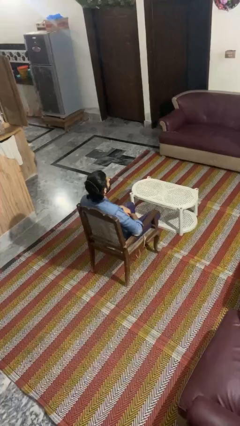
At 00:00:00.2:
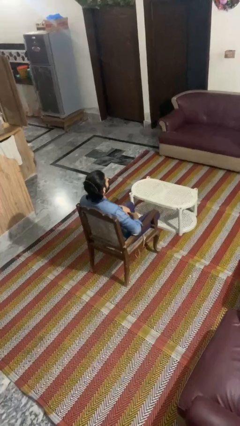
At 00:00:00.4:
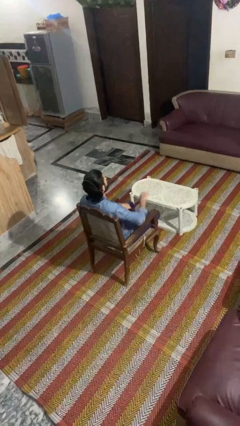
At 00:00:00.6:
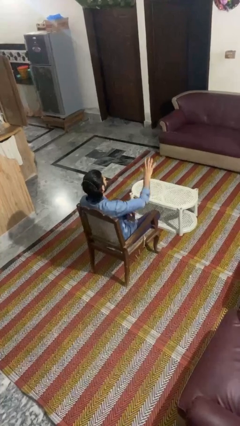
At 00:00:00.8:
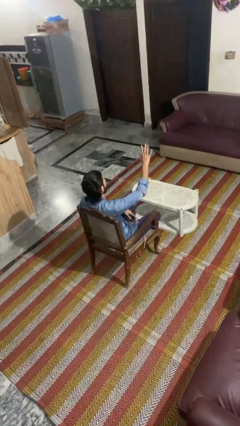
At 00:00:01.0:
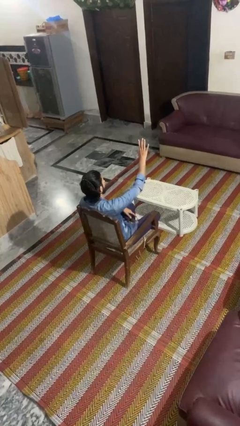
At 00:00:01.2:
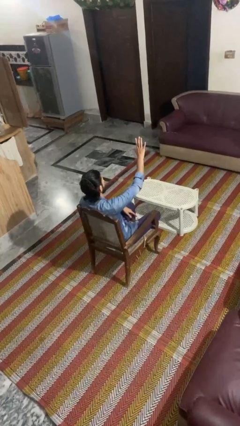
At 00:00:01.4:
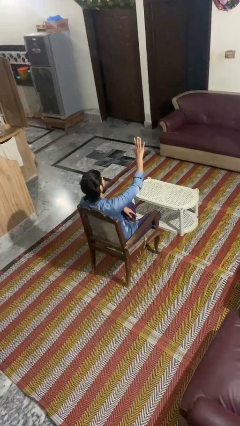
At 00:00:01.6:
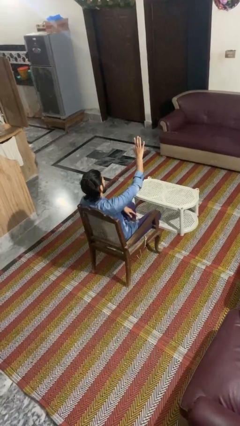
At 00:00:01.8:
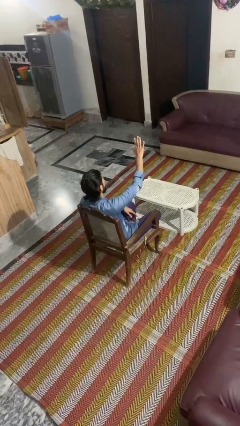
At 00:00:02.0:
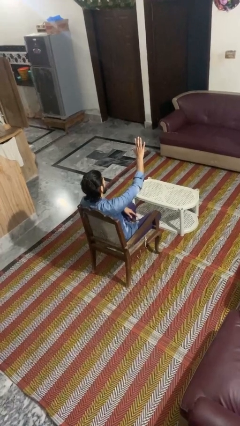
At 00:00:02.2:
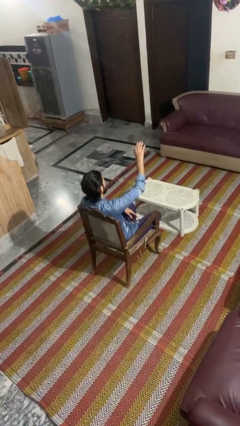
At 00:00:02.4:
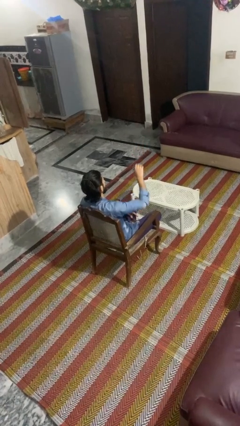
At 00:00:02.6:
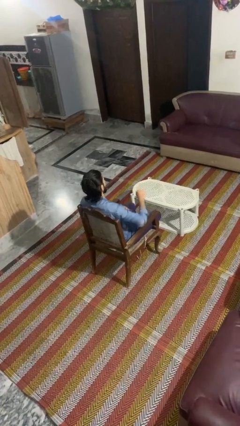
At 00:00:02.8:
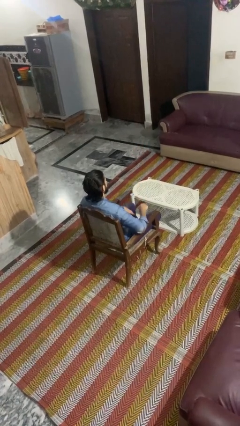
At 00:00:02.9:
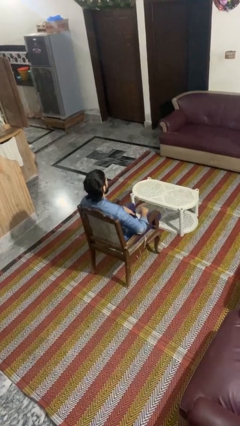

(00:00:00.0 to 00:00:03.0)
person gestures number five

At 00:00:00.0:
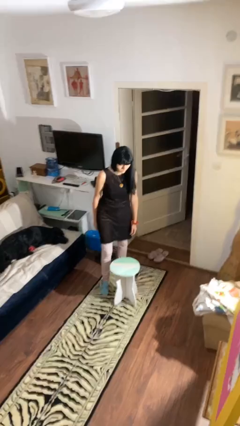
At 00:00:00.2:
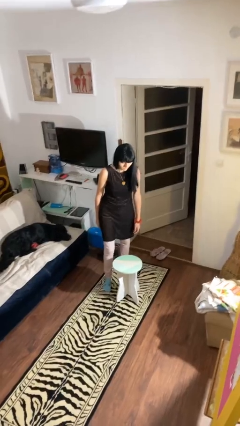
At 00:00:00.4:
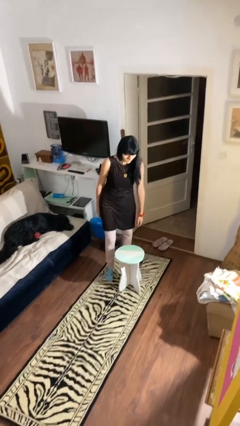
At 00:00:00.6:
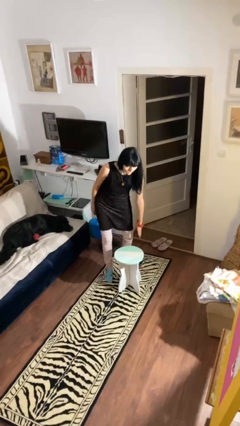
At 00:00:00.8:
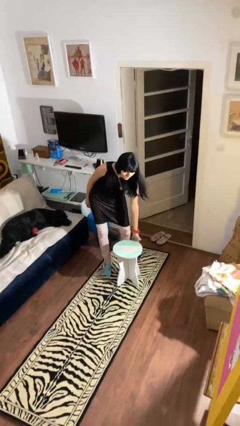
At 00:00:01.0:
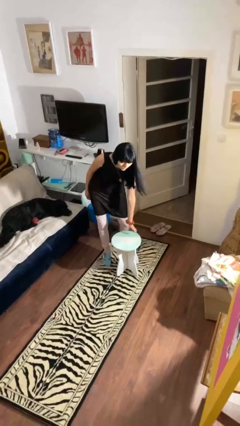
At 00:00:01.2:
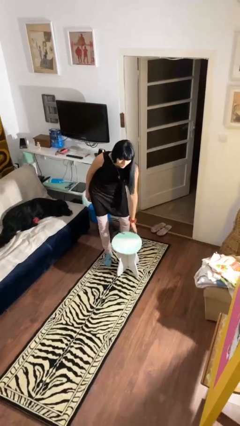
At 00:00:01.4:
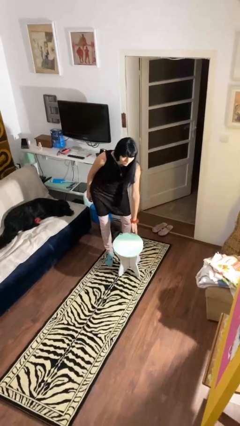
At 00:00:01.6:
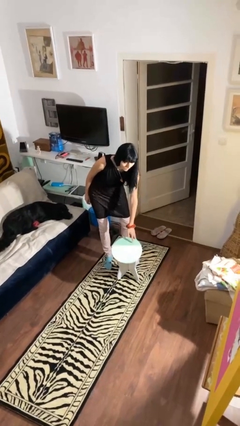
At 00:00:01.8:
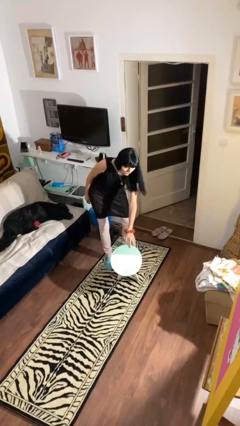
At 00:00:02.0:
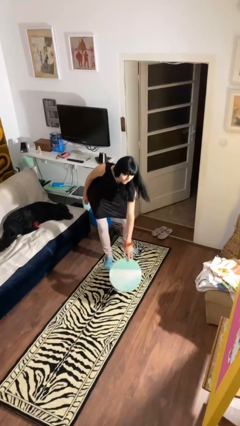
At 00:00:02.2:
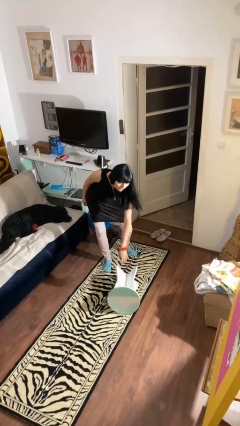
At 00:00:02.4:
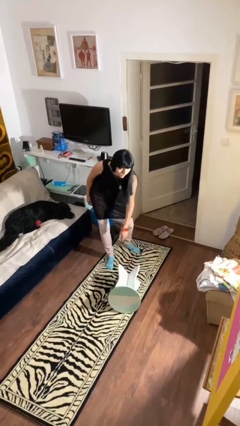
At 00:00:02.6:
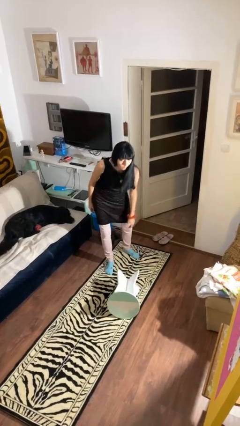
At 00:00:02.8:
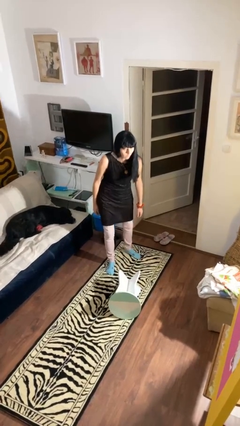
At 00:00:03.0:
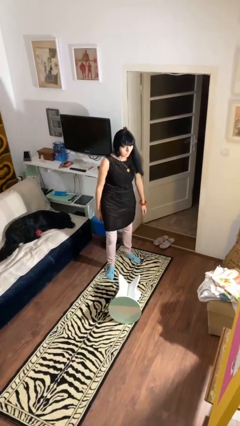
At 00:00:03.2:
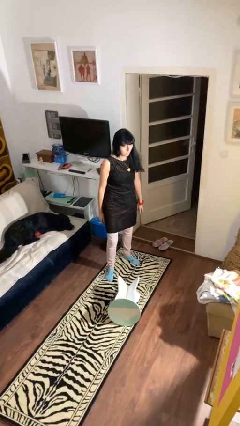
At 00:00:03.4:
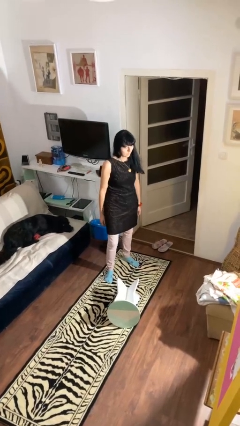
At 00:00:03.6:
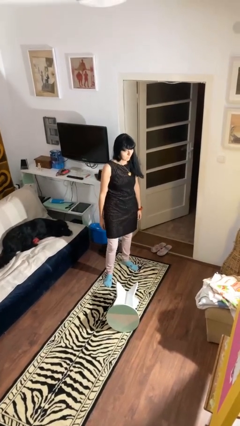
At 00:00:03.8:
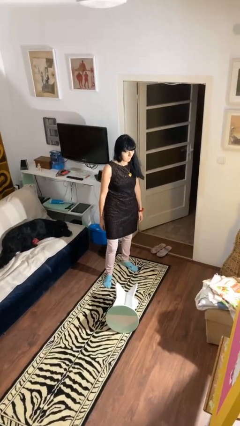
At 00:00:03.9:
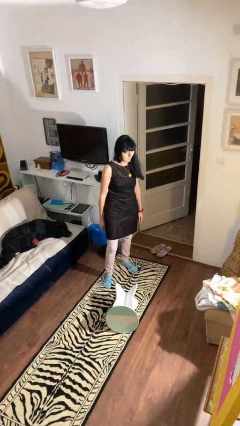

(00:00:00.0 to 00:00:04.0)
person knocks over furniture

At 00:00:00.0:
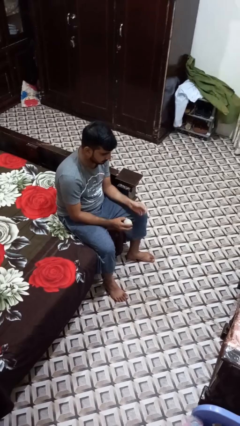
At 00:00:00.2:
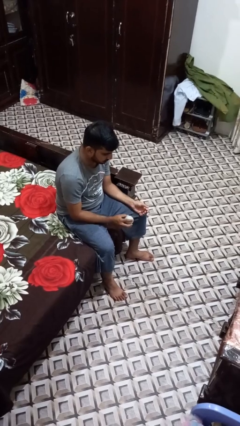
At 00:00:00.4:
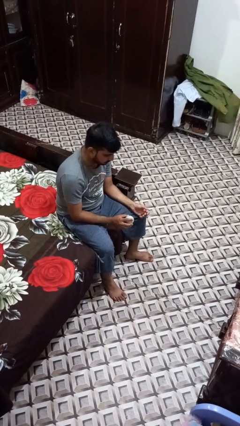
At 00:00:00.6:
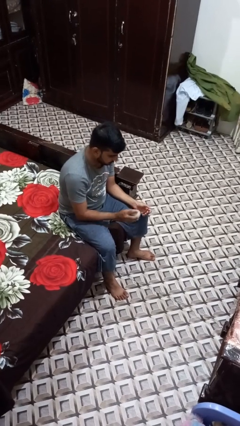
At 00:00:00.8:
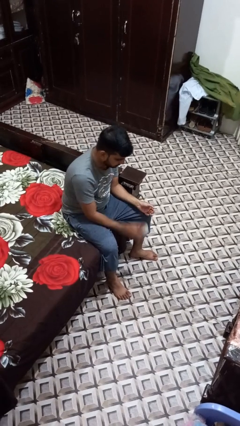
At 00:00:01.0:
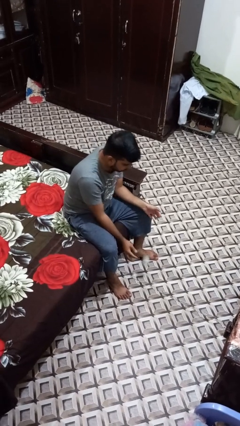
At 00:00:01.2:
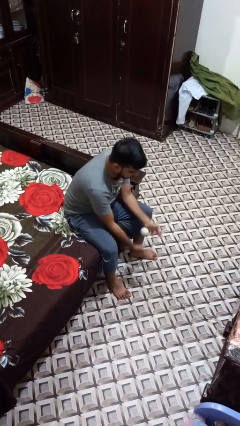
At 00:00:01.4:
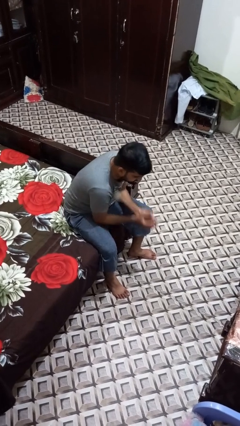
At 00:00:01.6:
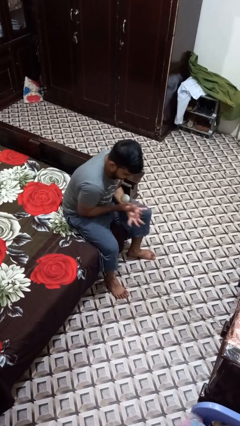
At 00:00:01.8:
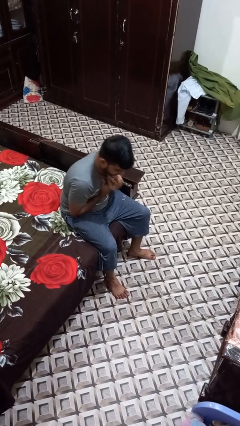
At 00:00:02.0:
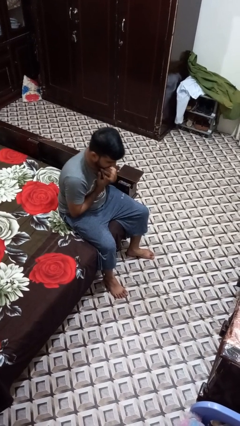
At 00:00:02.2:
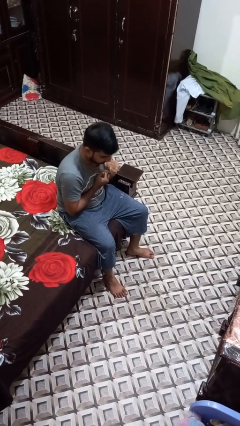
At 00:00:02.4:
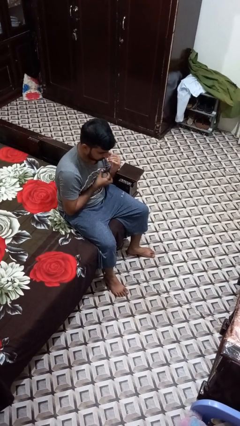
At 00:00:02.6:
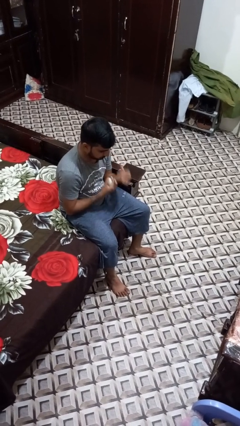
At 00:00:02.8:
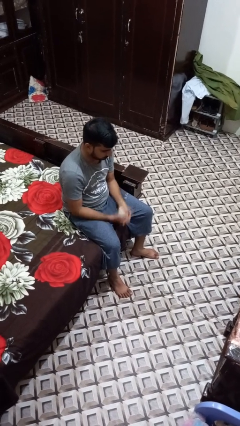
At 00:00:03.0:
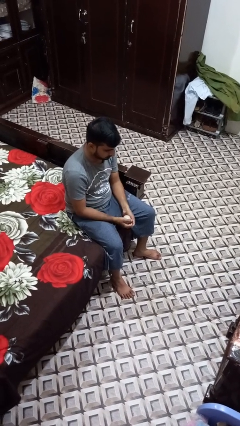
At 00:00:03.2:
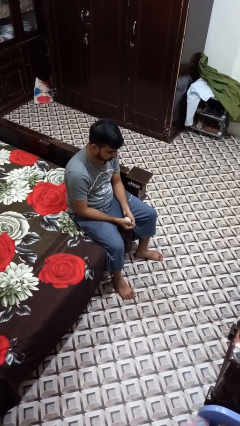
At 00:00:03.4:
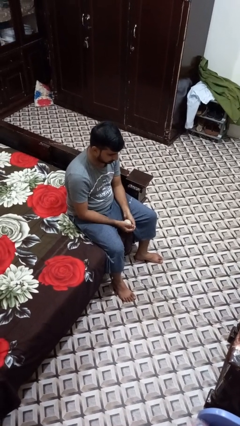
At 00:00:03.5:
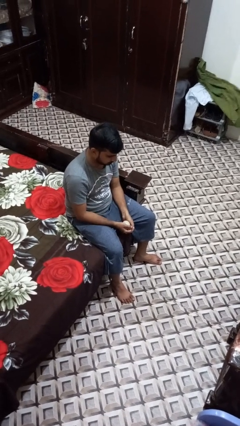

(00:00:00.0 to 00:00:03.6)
person bounces ball on floor

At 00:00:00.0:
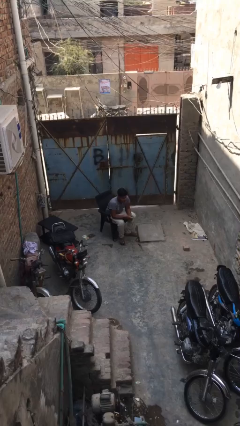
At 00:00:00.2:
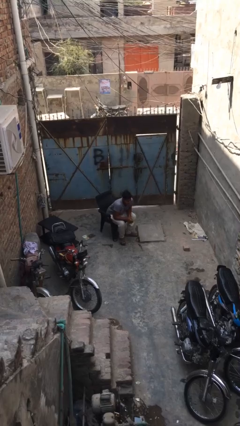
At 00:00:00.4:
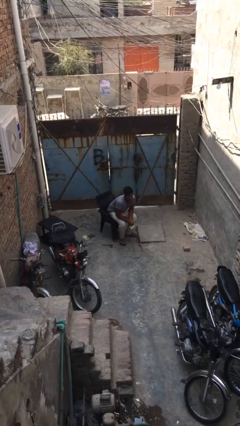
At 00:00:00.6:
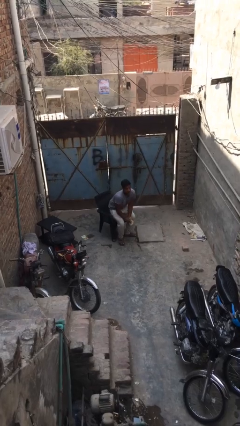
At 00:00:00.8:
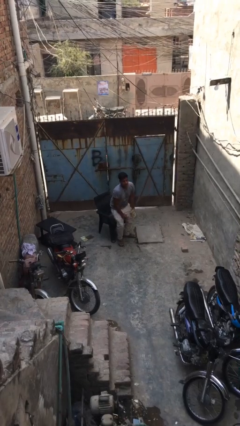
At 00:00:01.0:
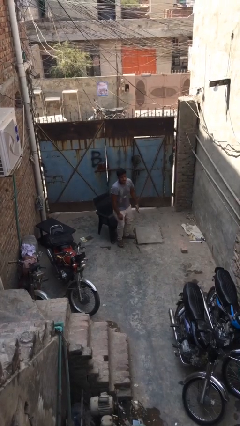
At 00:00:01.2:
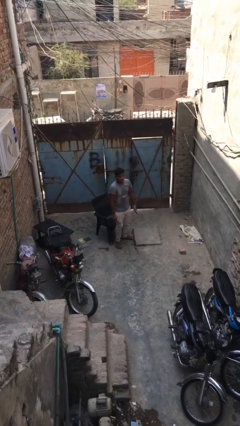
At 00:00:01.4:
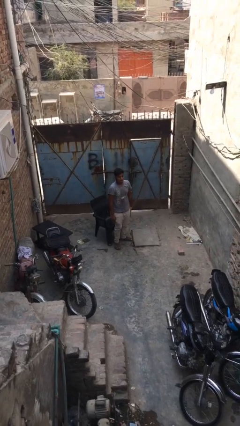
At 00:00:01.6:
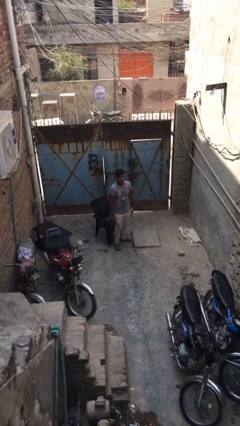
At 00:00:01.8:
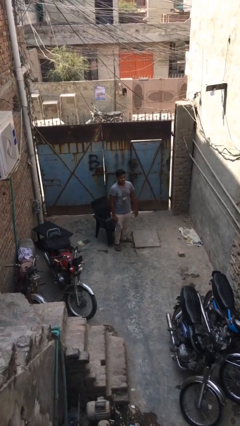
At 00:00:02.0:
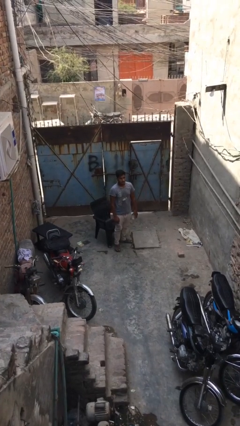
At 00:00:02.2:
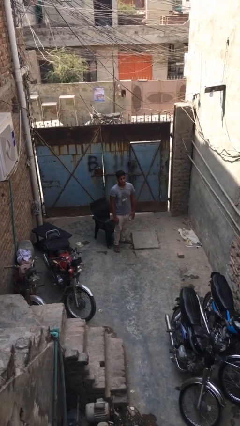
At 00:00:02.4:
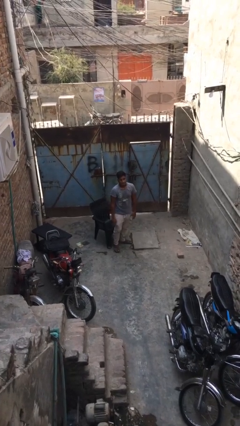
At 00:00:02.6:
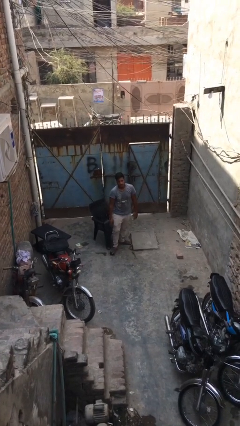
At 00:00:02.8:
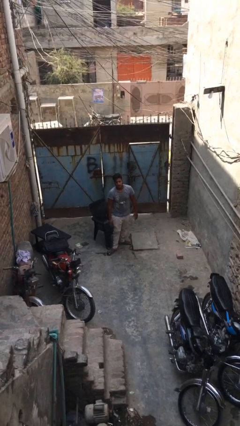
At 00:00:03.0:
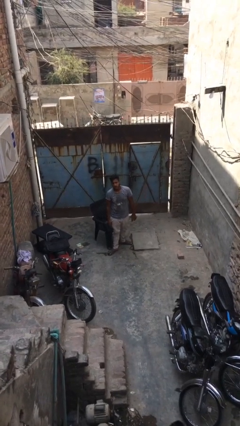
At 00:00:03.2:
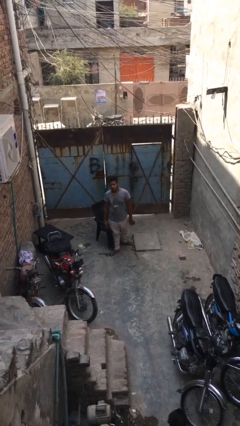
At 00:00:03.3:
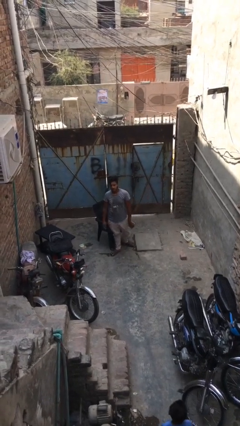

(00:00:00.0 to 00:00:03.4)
person stands up

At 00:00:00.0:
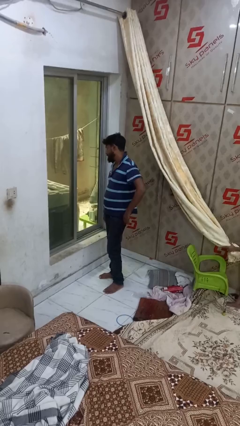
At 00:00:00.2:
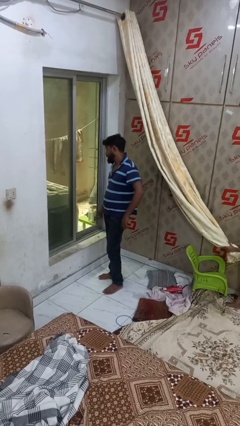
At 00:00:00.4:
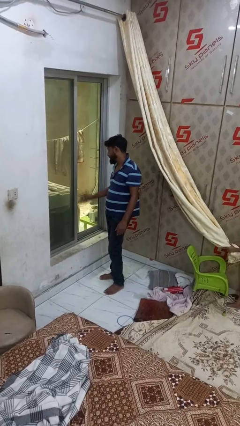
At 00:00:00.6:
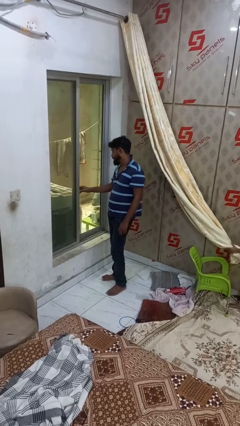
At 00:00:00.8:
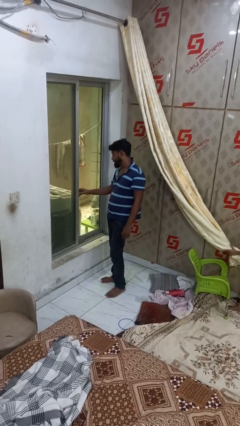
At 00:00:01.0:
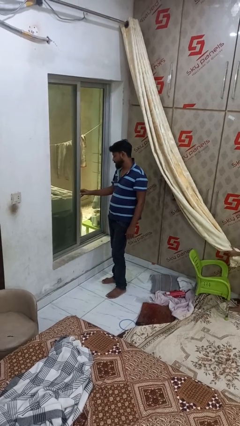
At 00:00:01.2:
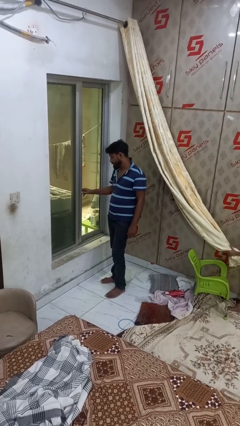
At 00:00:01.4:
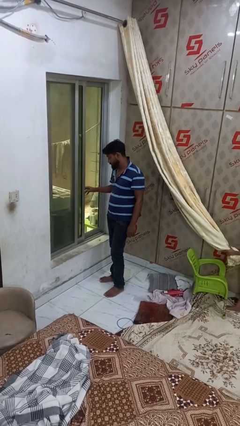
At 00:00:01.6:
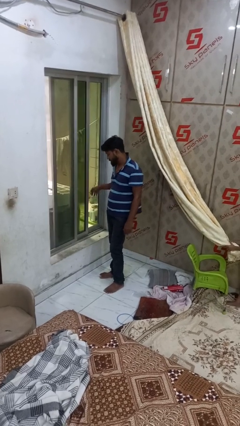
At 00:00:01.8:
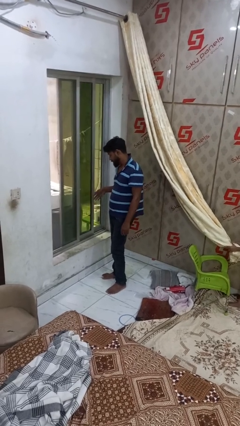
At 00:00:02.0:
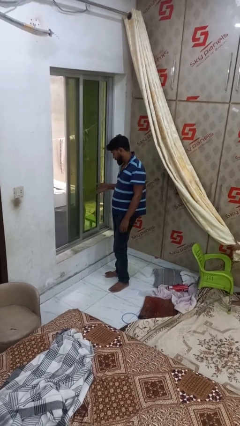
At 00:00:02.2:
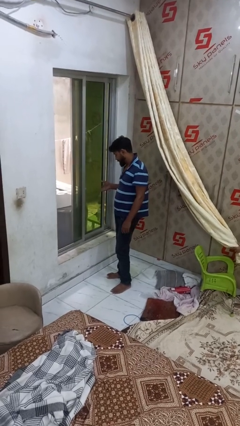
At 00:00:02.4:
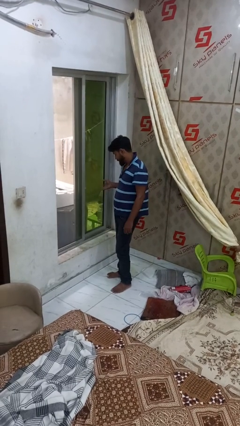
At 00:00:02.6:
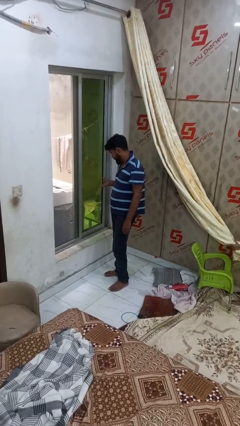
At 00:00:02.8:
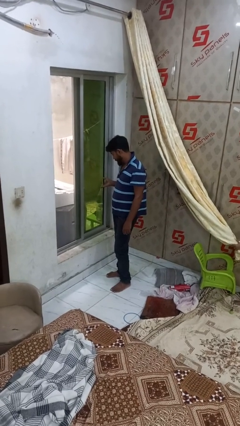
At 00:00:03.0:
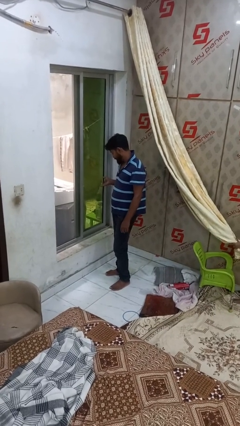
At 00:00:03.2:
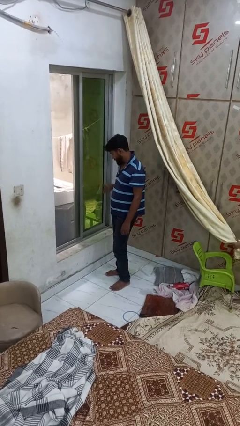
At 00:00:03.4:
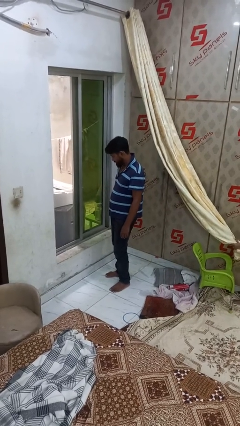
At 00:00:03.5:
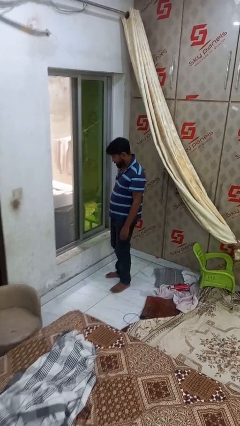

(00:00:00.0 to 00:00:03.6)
person opens sliding door
